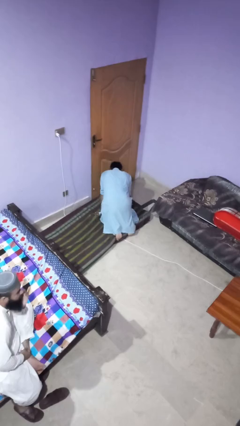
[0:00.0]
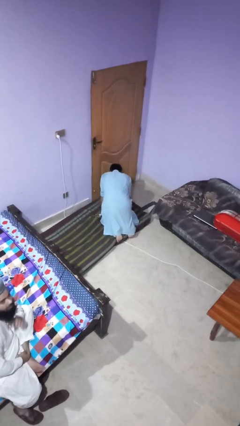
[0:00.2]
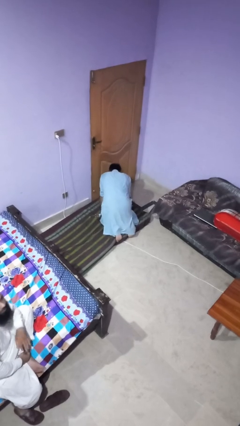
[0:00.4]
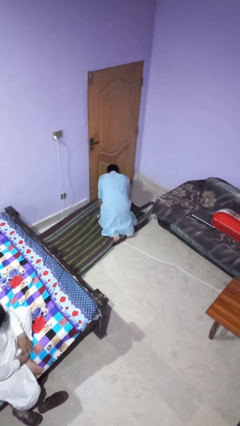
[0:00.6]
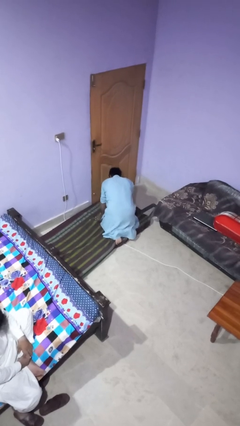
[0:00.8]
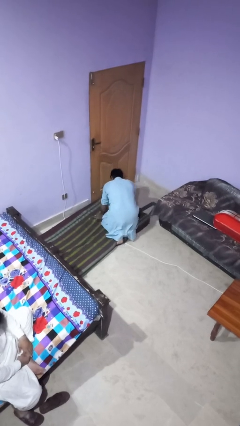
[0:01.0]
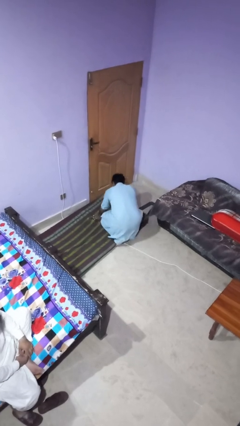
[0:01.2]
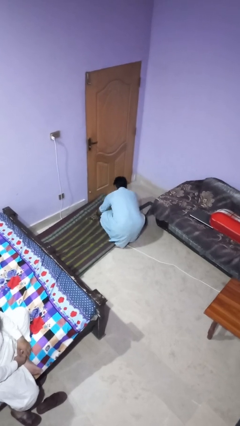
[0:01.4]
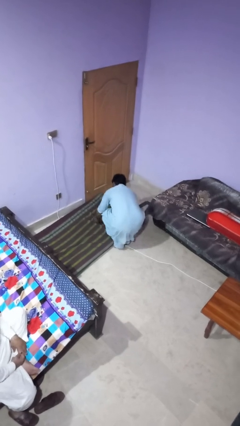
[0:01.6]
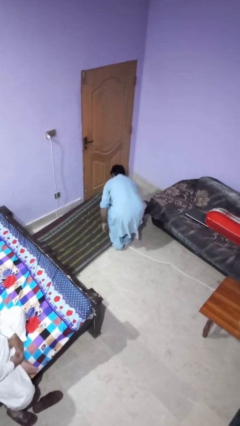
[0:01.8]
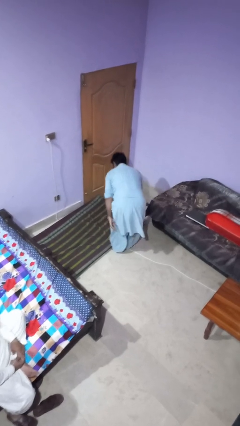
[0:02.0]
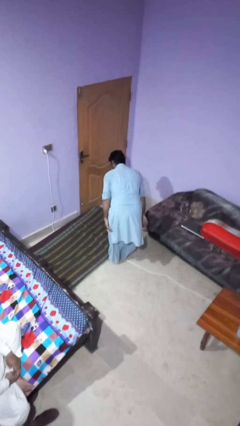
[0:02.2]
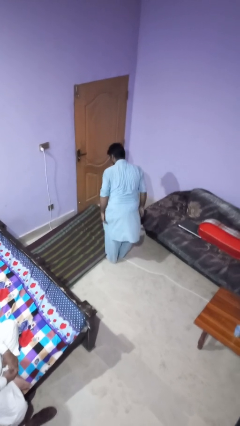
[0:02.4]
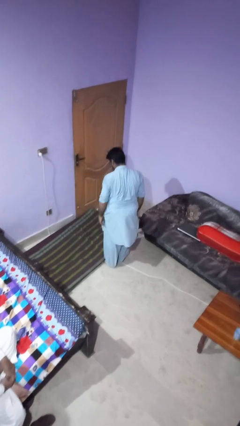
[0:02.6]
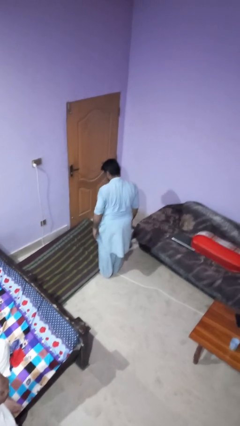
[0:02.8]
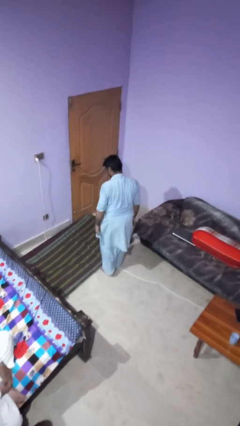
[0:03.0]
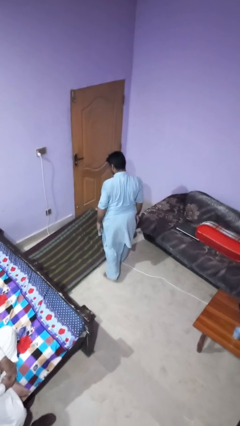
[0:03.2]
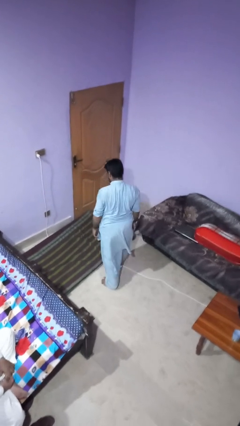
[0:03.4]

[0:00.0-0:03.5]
person stands up from floor

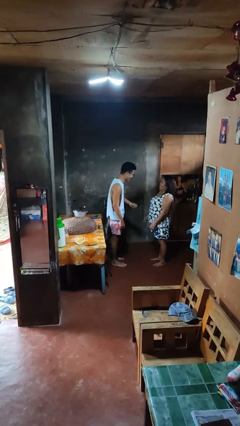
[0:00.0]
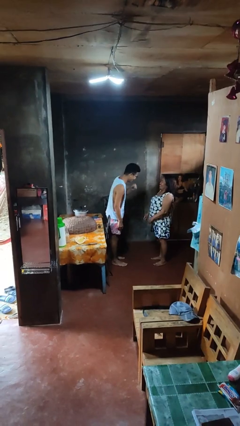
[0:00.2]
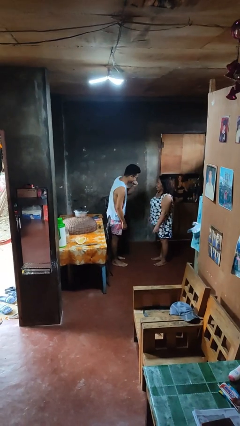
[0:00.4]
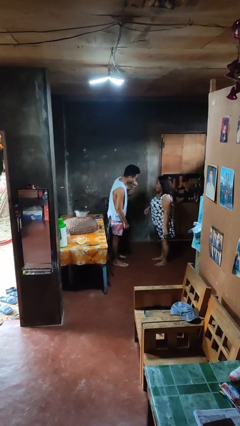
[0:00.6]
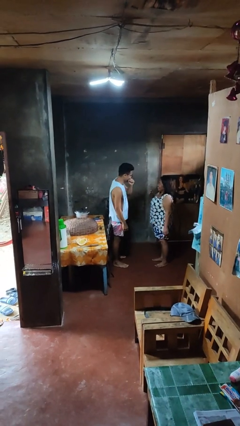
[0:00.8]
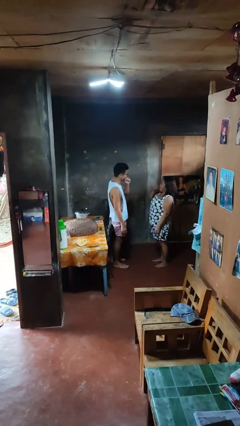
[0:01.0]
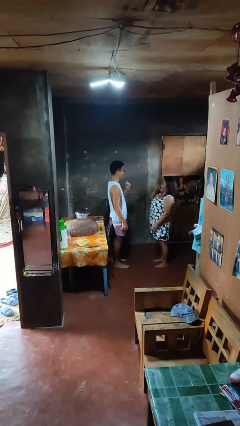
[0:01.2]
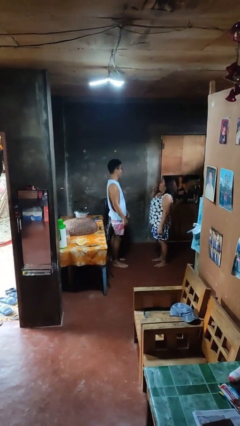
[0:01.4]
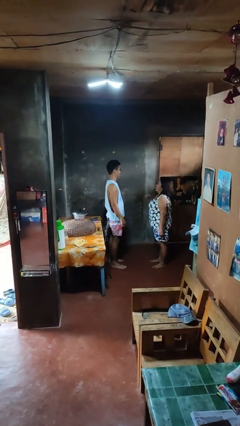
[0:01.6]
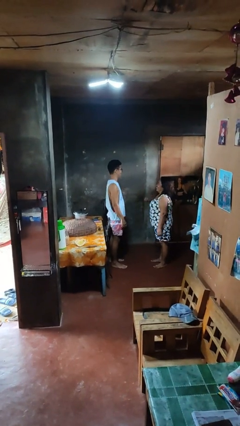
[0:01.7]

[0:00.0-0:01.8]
person laughs with person

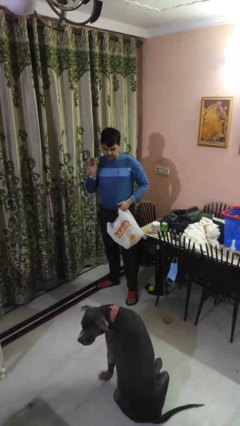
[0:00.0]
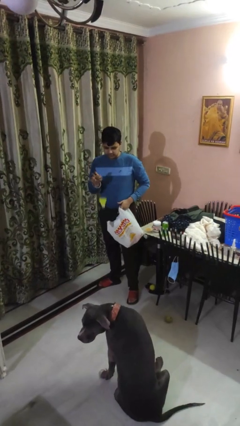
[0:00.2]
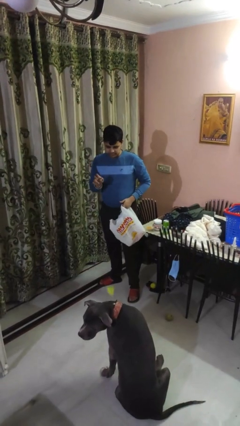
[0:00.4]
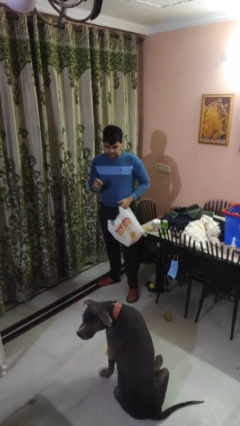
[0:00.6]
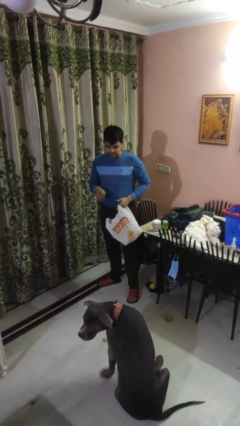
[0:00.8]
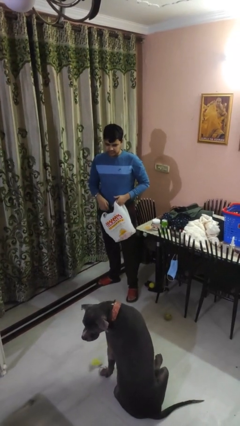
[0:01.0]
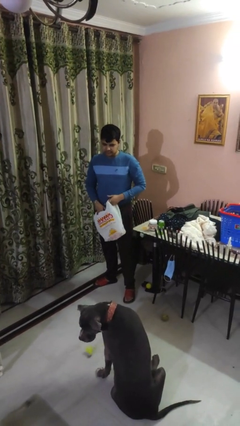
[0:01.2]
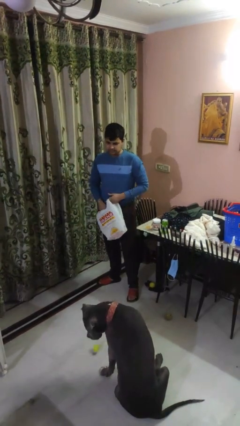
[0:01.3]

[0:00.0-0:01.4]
person throws object to dog

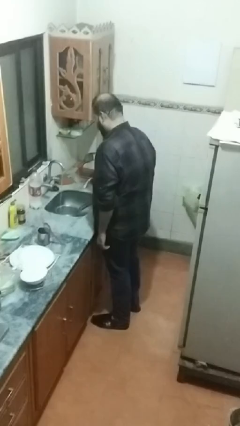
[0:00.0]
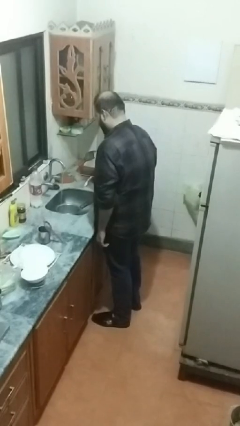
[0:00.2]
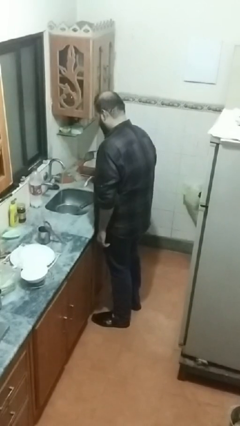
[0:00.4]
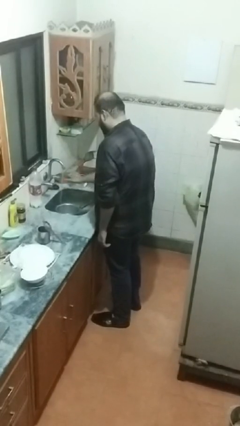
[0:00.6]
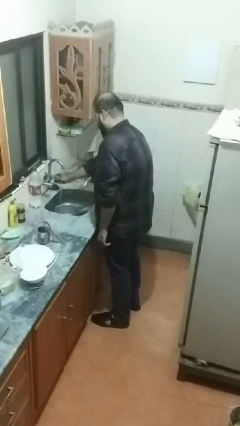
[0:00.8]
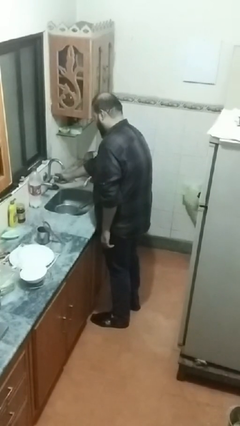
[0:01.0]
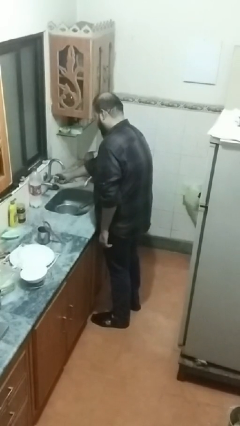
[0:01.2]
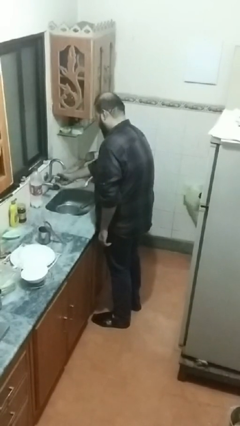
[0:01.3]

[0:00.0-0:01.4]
person turns off faucet

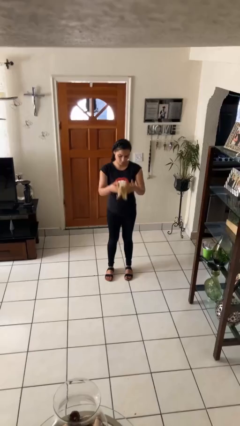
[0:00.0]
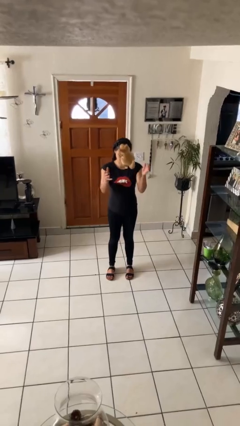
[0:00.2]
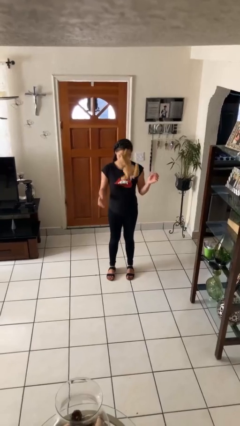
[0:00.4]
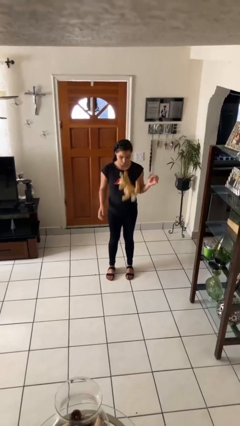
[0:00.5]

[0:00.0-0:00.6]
person throws object into air

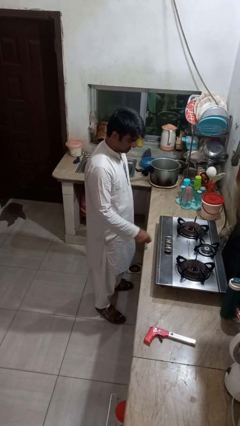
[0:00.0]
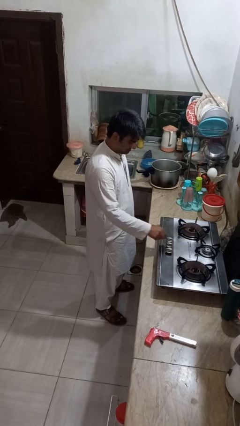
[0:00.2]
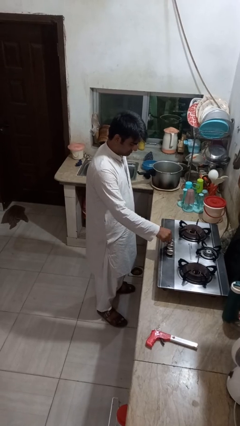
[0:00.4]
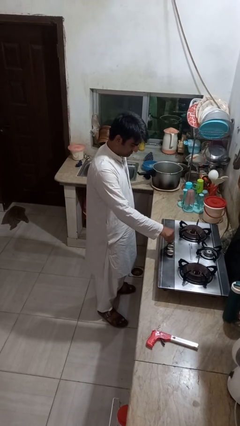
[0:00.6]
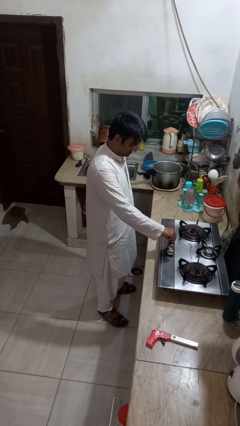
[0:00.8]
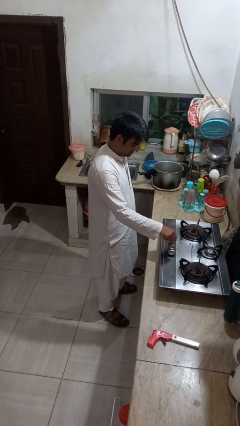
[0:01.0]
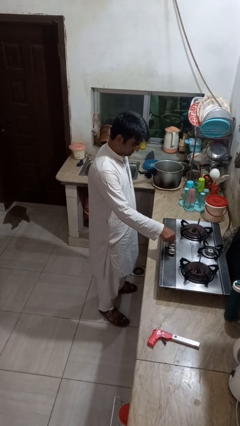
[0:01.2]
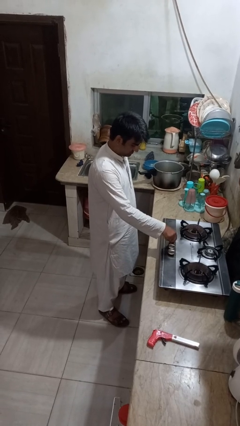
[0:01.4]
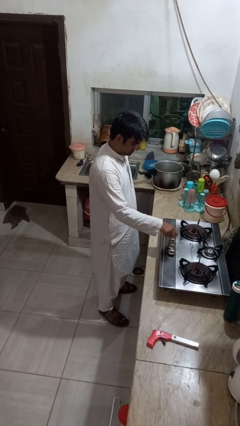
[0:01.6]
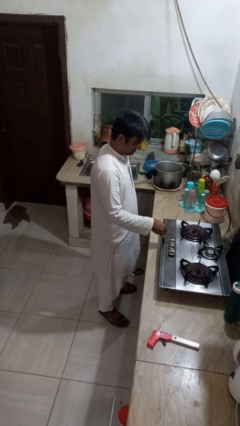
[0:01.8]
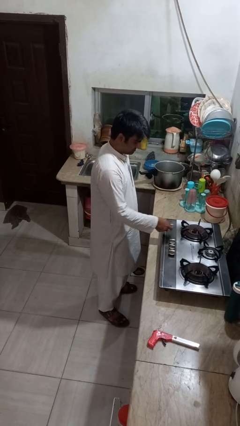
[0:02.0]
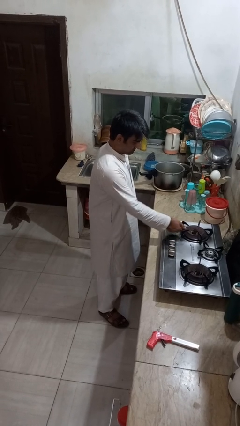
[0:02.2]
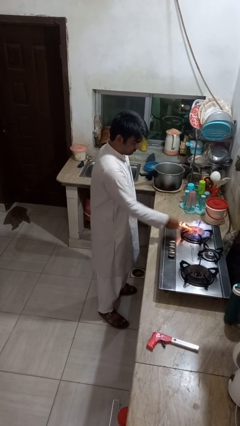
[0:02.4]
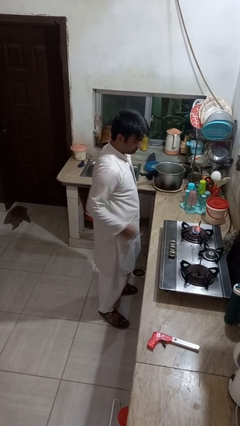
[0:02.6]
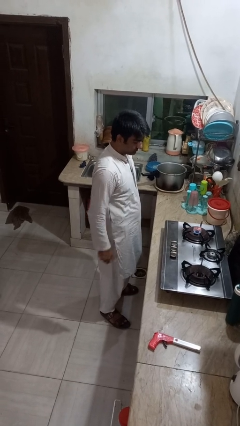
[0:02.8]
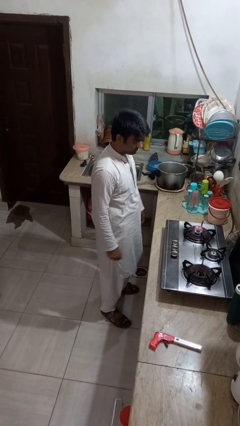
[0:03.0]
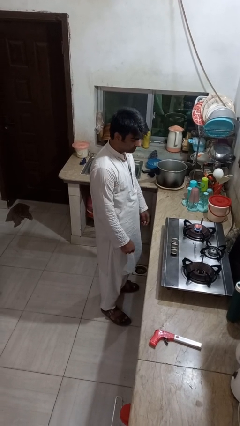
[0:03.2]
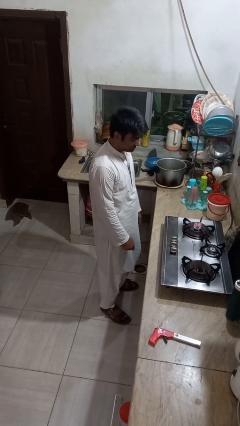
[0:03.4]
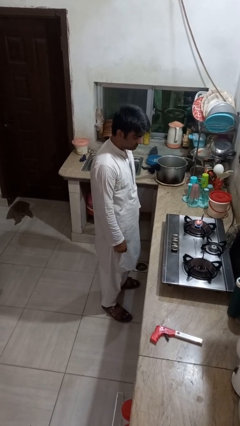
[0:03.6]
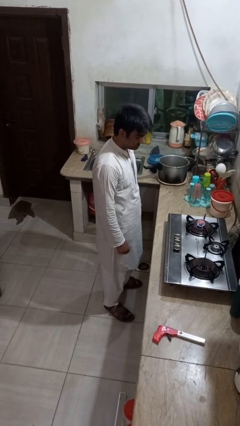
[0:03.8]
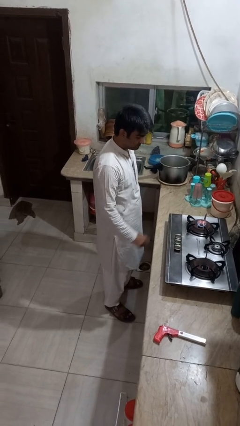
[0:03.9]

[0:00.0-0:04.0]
person turns on stovetop

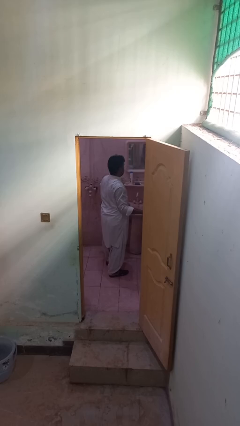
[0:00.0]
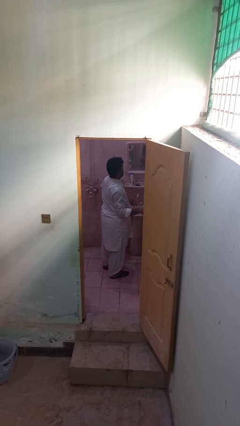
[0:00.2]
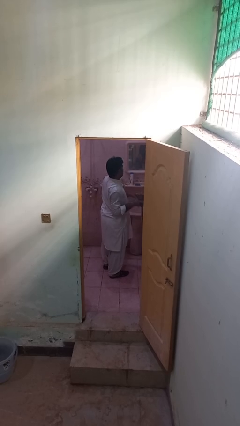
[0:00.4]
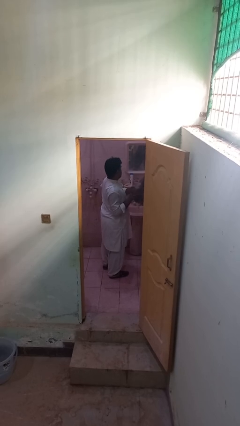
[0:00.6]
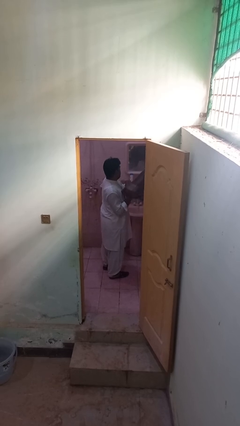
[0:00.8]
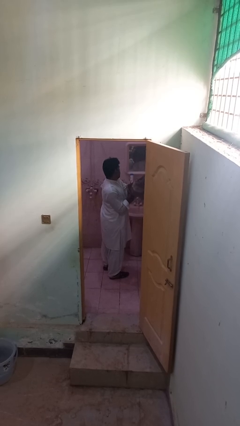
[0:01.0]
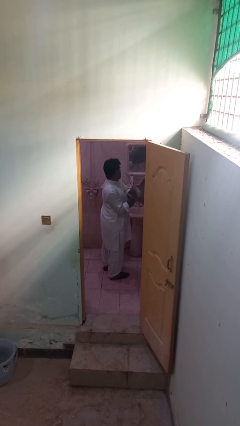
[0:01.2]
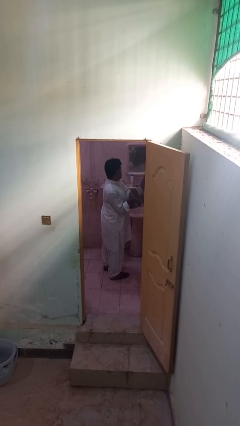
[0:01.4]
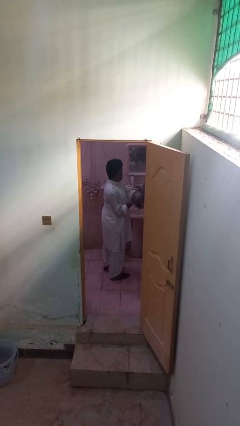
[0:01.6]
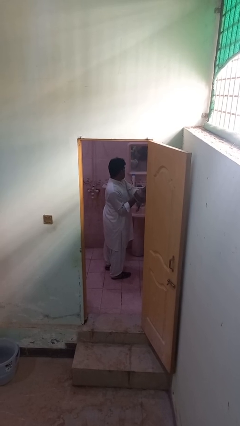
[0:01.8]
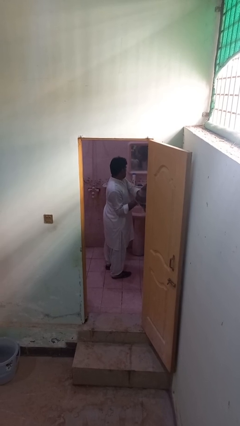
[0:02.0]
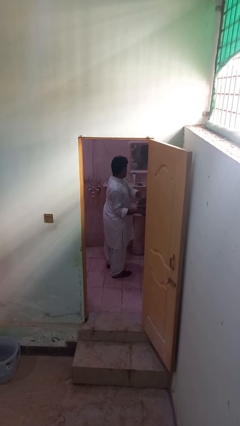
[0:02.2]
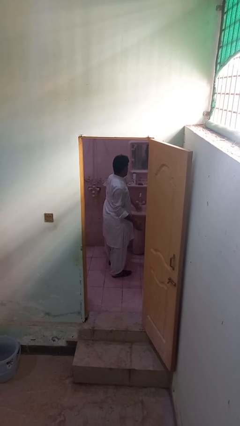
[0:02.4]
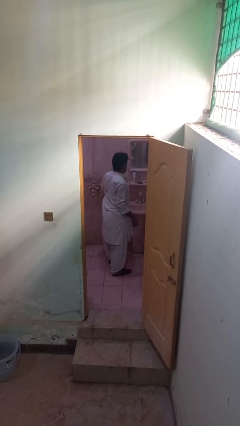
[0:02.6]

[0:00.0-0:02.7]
person dries hands with towel

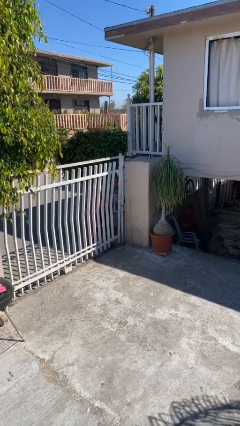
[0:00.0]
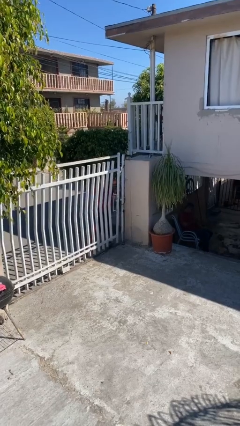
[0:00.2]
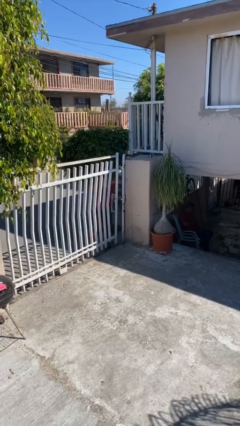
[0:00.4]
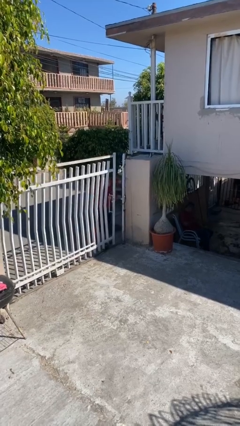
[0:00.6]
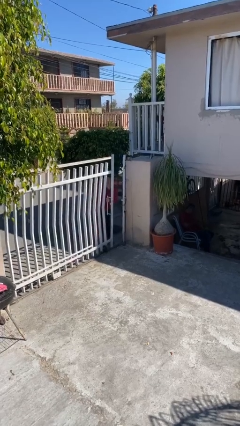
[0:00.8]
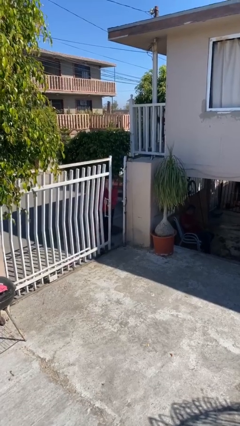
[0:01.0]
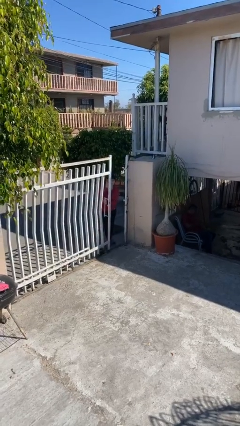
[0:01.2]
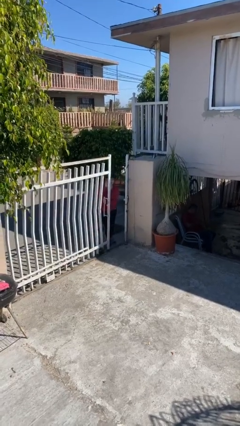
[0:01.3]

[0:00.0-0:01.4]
person opens facility door

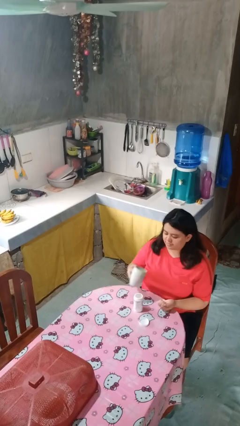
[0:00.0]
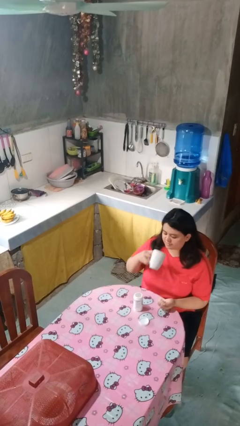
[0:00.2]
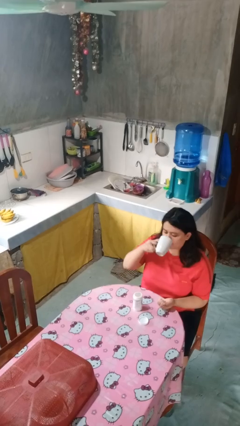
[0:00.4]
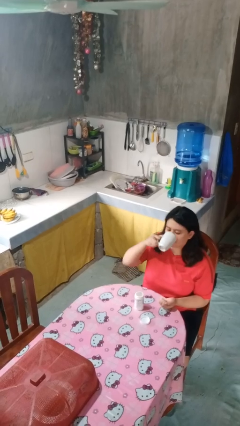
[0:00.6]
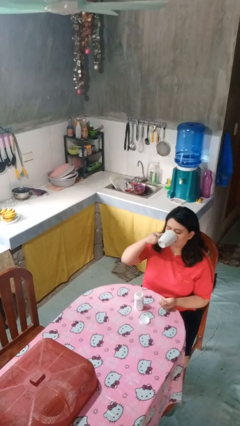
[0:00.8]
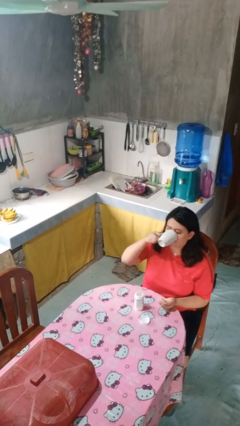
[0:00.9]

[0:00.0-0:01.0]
person drinks from cup
